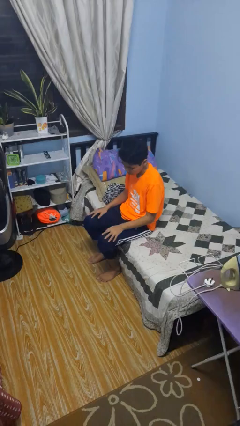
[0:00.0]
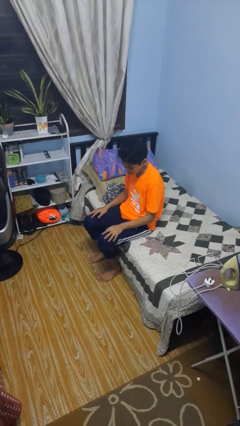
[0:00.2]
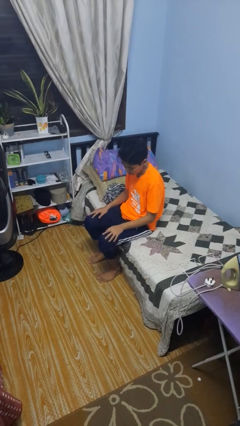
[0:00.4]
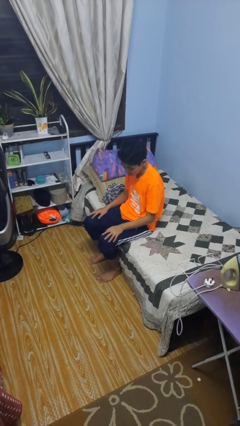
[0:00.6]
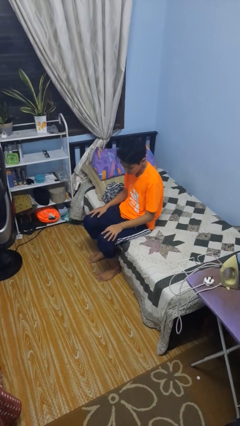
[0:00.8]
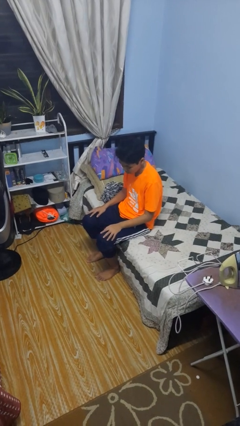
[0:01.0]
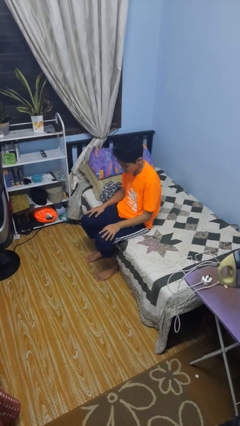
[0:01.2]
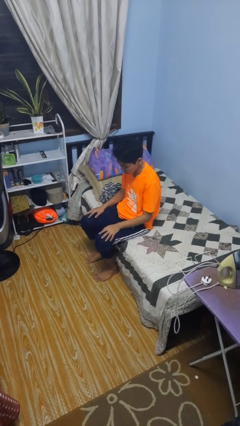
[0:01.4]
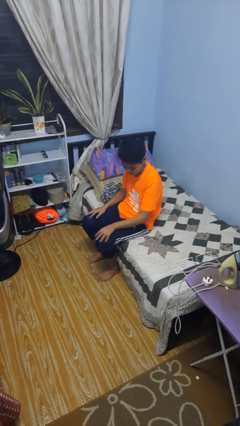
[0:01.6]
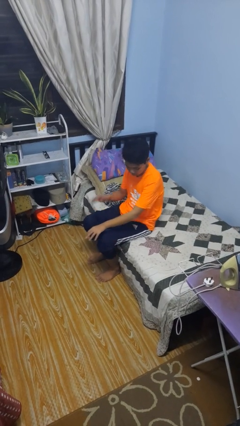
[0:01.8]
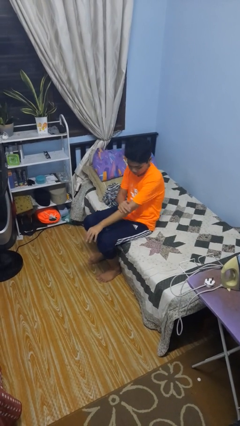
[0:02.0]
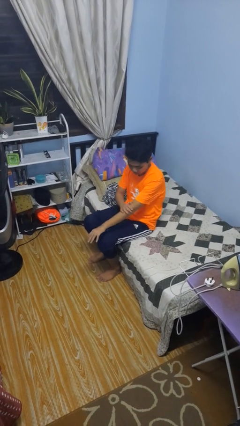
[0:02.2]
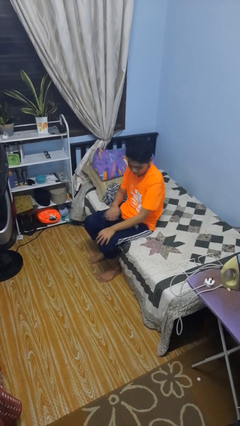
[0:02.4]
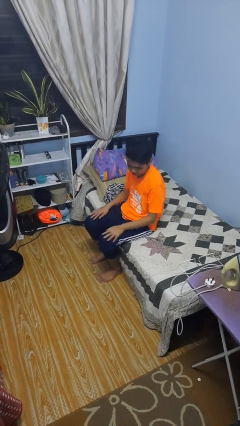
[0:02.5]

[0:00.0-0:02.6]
person swats bug

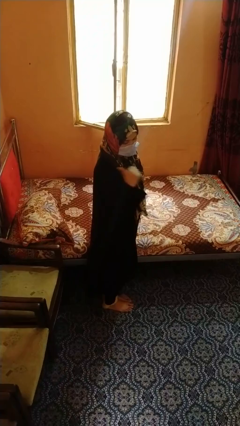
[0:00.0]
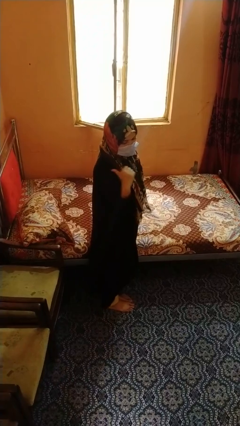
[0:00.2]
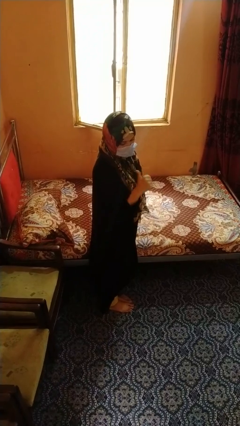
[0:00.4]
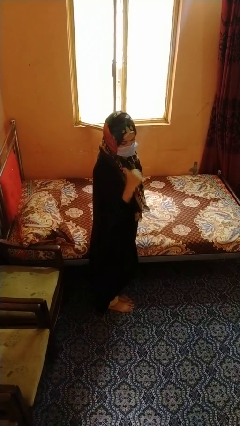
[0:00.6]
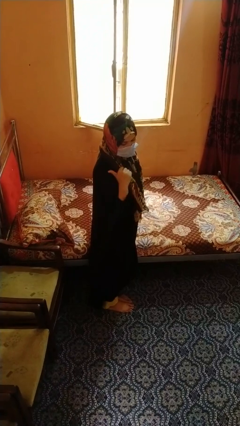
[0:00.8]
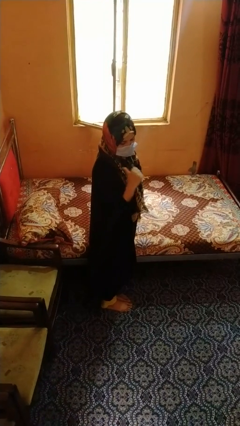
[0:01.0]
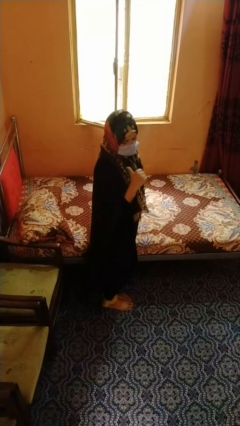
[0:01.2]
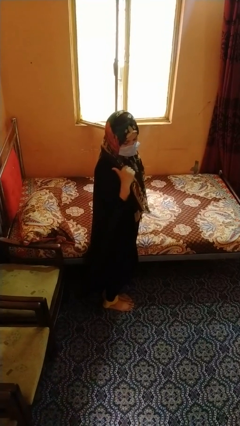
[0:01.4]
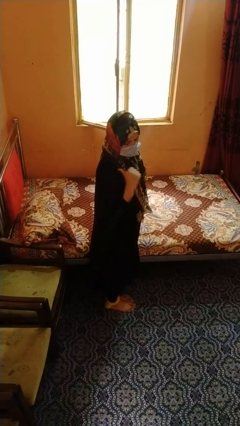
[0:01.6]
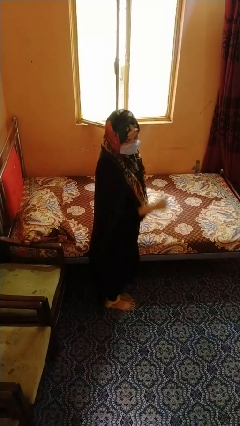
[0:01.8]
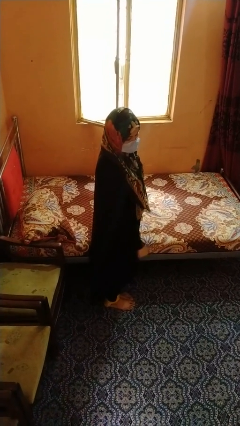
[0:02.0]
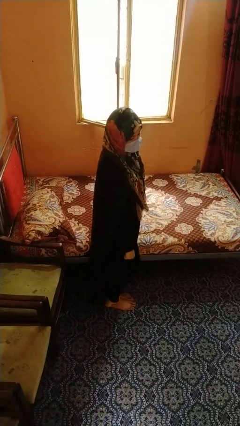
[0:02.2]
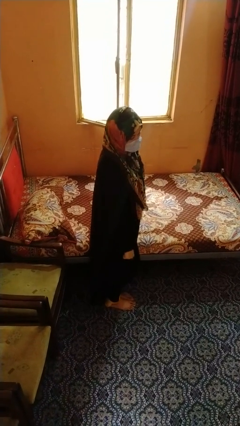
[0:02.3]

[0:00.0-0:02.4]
person gestures behind me

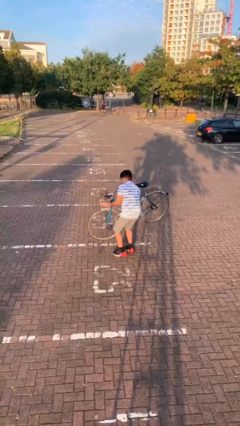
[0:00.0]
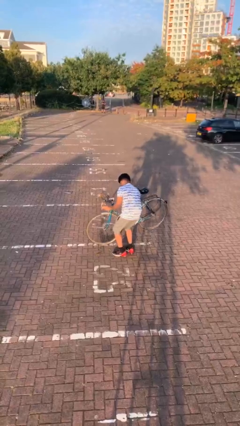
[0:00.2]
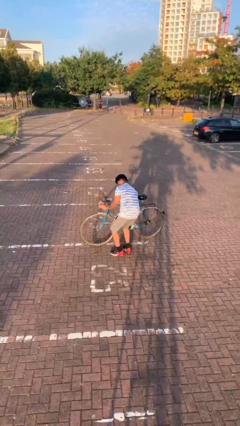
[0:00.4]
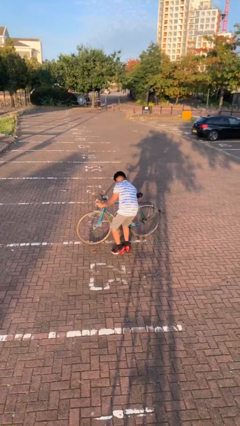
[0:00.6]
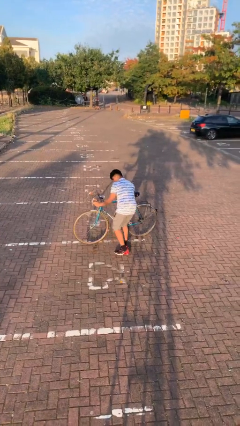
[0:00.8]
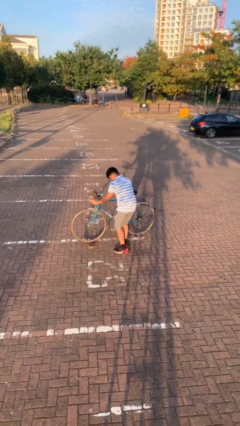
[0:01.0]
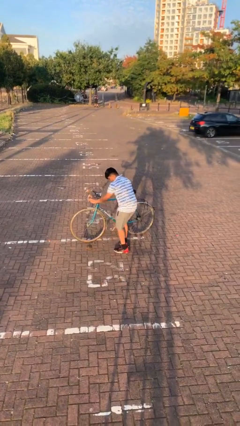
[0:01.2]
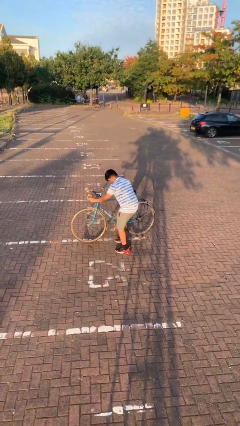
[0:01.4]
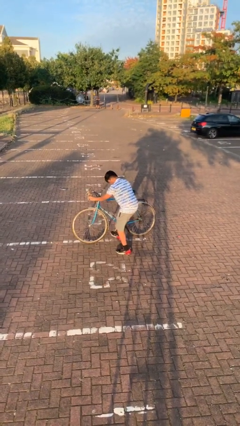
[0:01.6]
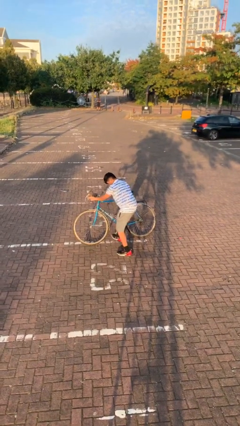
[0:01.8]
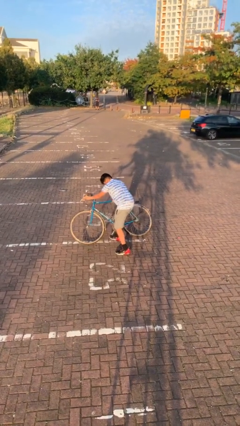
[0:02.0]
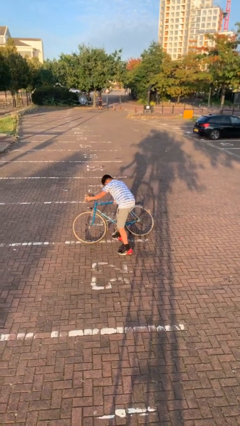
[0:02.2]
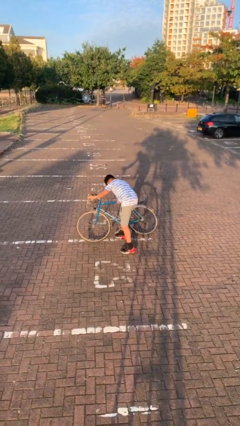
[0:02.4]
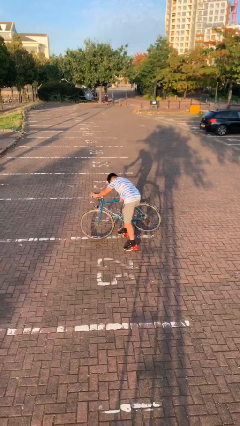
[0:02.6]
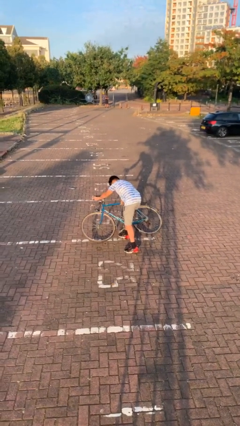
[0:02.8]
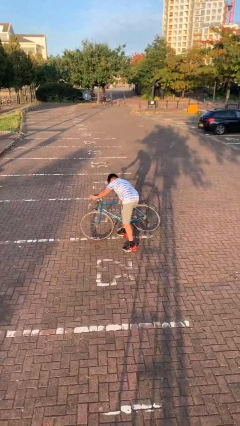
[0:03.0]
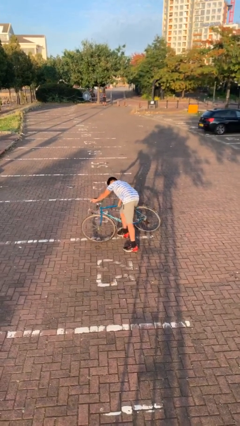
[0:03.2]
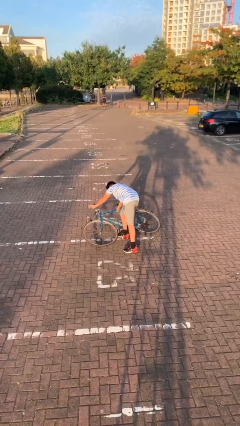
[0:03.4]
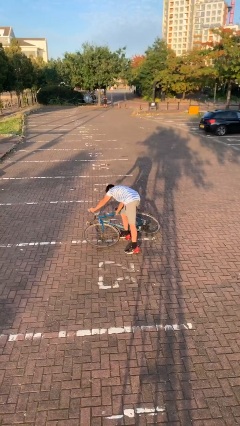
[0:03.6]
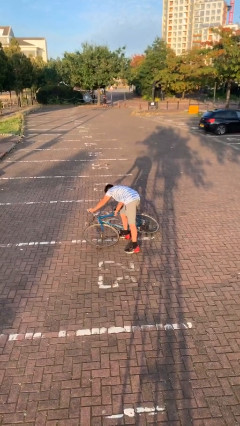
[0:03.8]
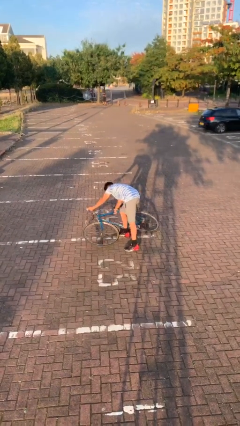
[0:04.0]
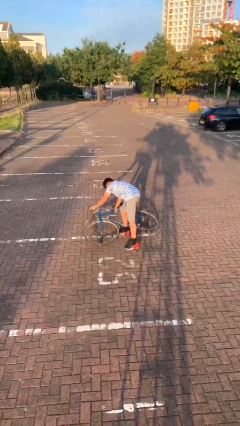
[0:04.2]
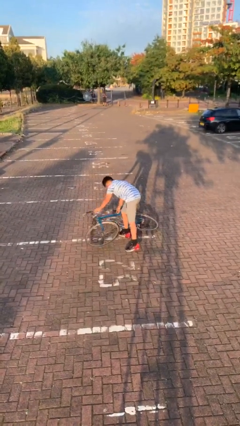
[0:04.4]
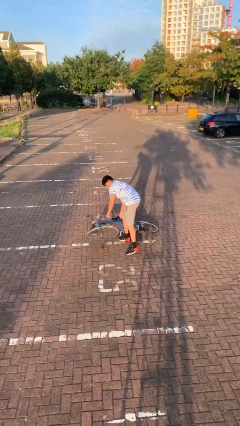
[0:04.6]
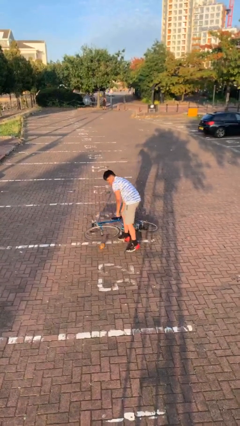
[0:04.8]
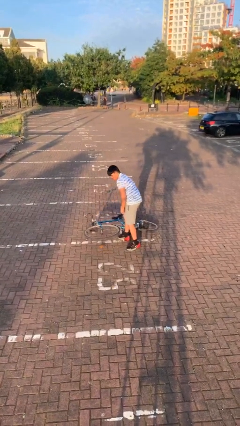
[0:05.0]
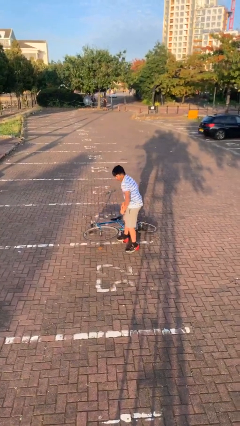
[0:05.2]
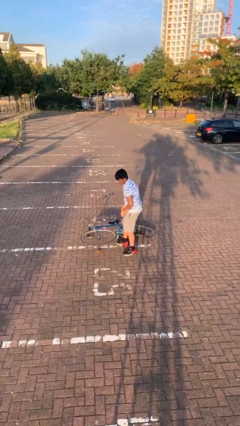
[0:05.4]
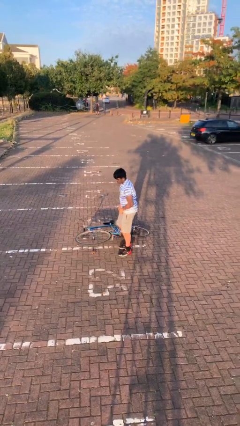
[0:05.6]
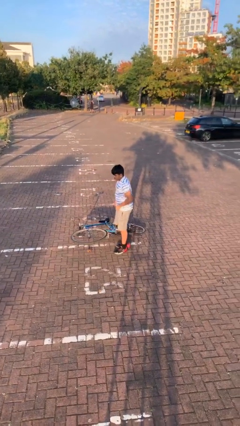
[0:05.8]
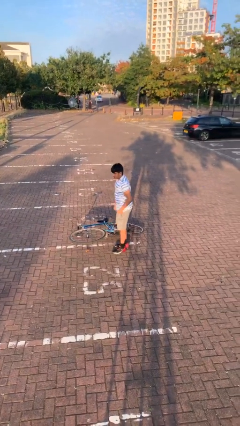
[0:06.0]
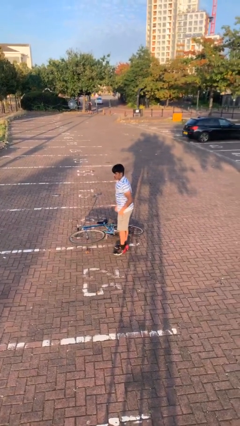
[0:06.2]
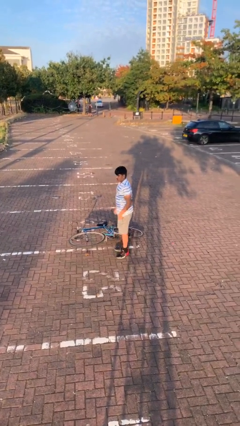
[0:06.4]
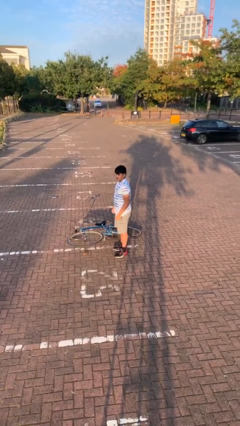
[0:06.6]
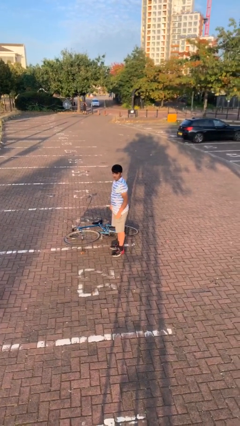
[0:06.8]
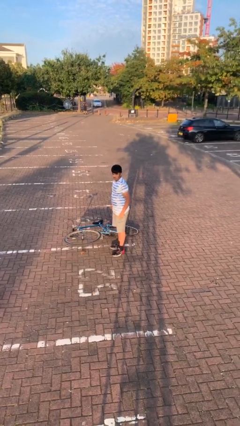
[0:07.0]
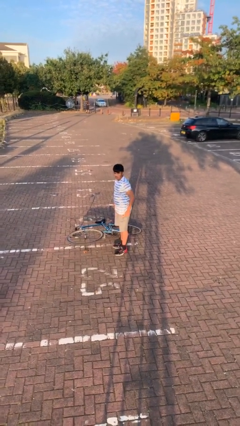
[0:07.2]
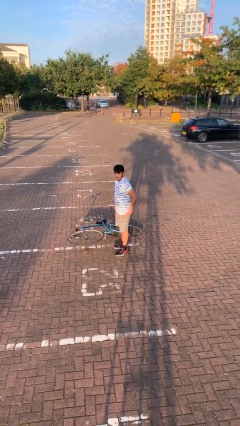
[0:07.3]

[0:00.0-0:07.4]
person puts down object on floor

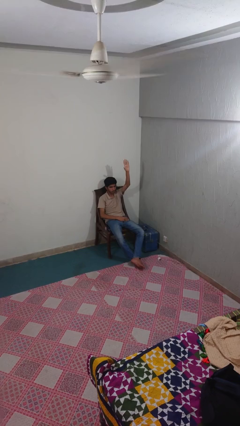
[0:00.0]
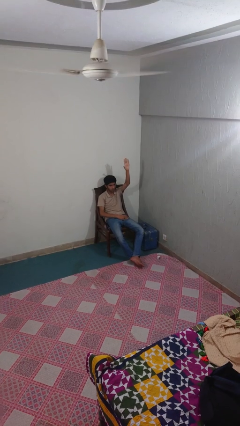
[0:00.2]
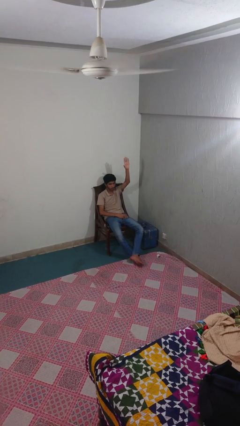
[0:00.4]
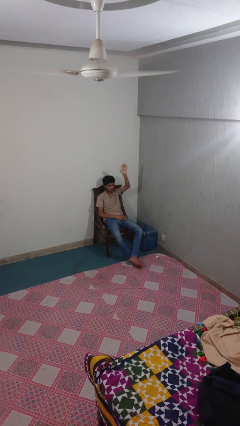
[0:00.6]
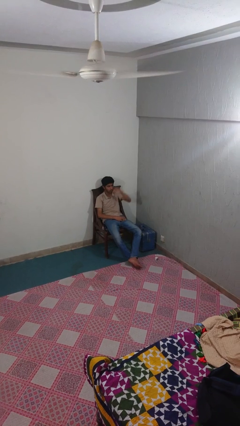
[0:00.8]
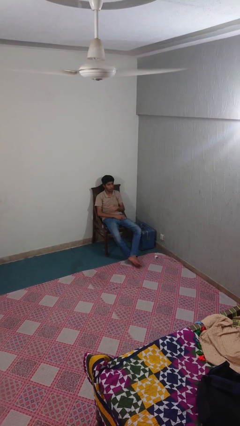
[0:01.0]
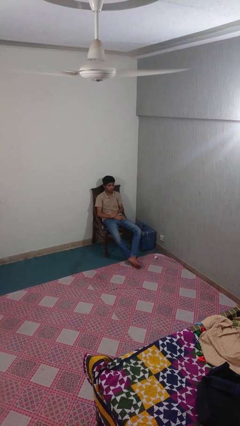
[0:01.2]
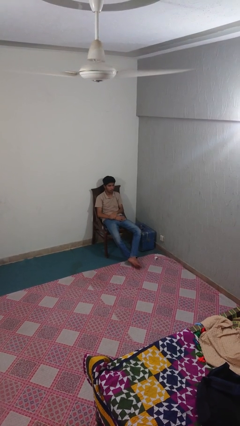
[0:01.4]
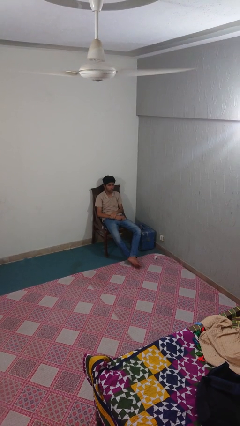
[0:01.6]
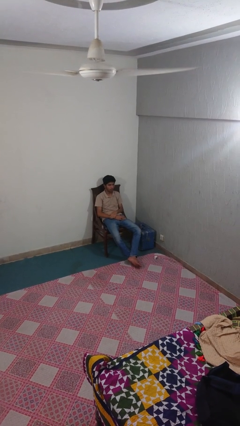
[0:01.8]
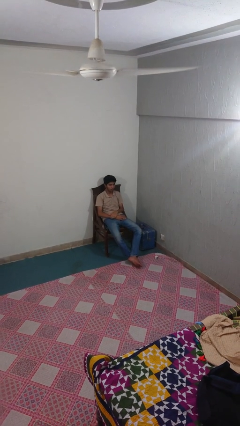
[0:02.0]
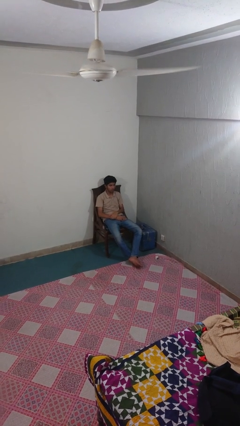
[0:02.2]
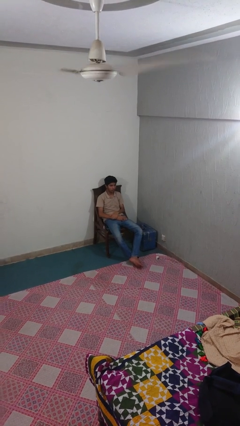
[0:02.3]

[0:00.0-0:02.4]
person gestures lower hand

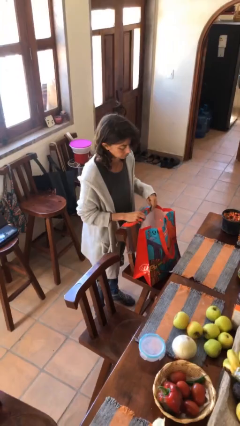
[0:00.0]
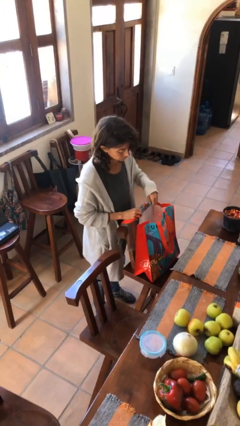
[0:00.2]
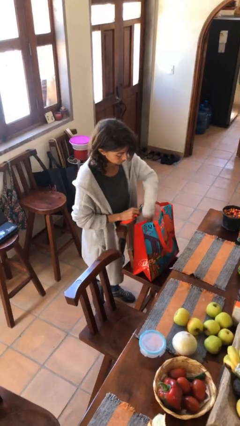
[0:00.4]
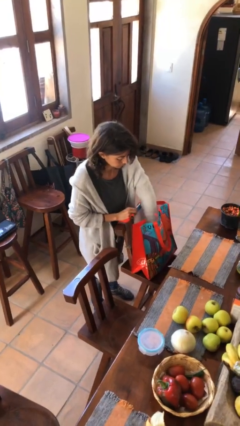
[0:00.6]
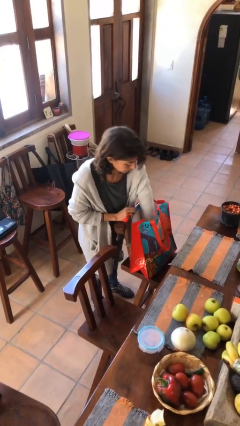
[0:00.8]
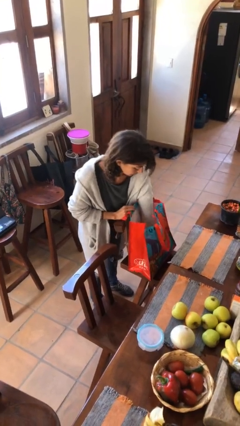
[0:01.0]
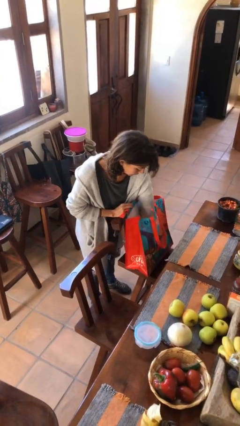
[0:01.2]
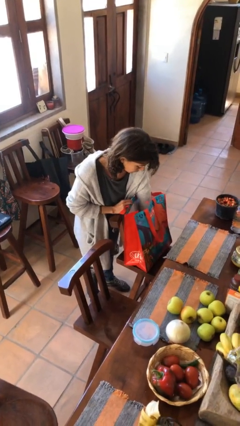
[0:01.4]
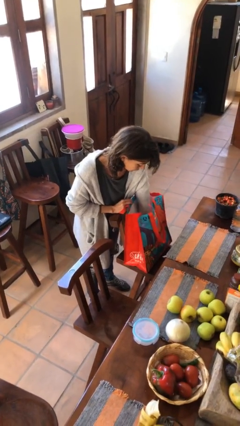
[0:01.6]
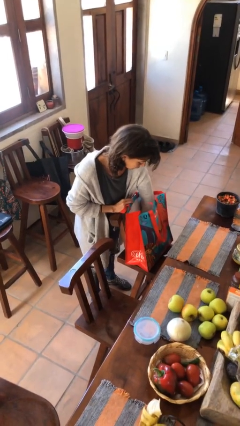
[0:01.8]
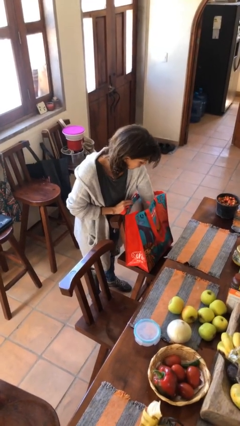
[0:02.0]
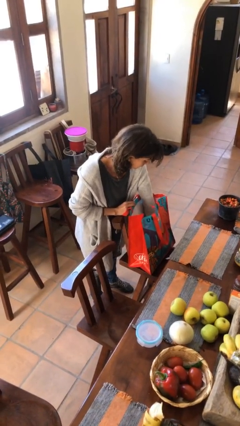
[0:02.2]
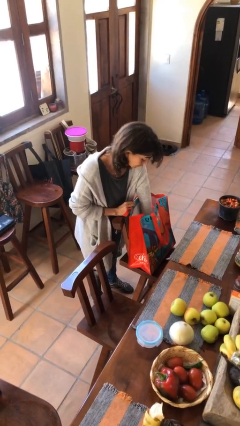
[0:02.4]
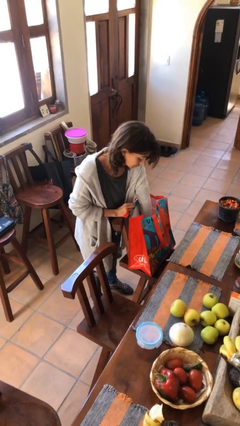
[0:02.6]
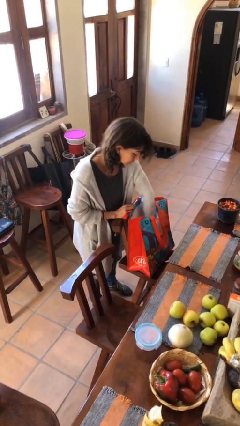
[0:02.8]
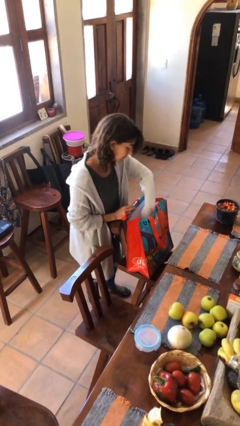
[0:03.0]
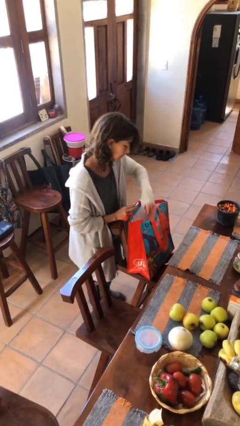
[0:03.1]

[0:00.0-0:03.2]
person searches in bag
